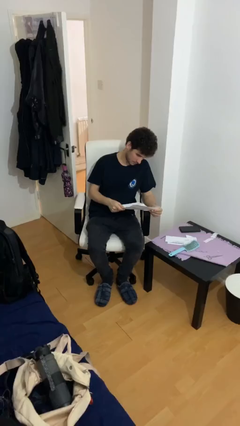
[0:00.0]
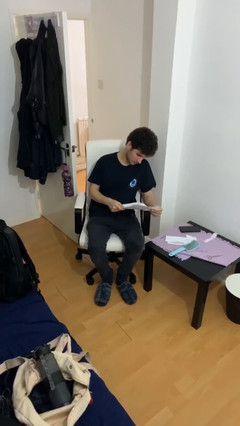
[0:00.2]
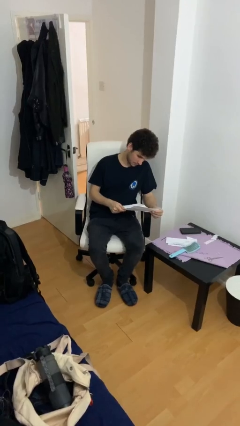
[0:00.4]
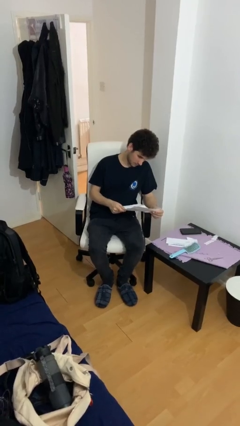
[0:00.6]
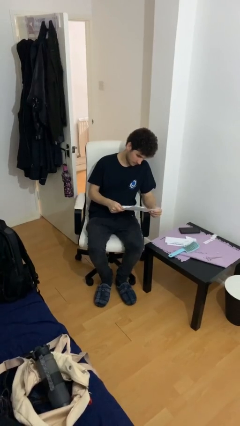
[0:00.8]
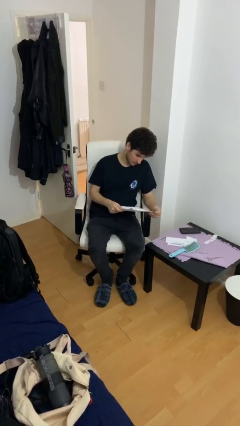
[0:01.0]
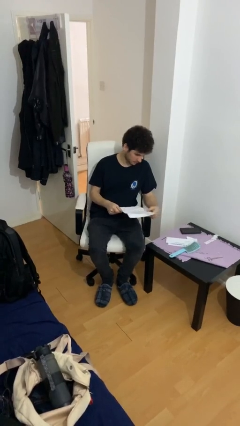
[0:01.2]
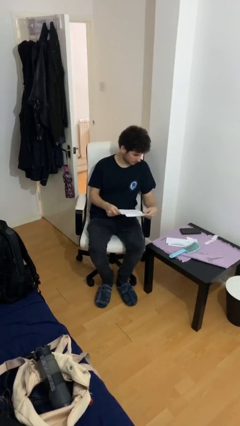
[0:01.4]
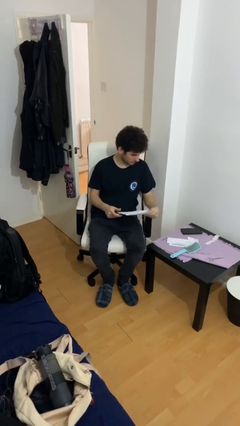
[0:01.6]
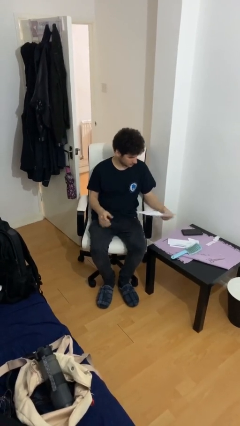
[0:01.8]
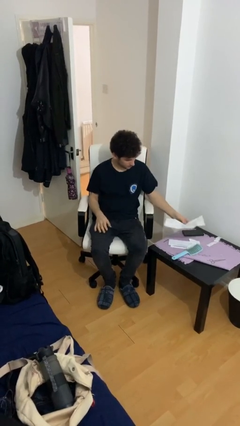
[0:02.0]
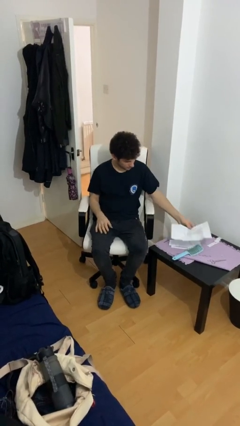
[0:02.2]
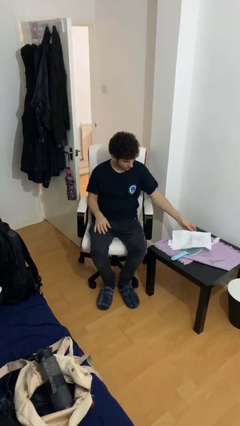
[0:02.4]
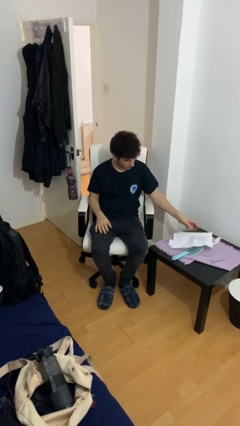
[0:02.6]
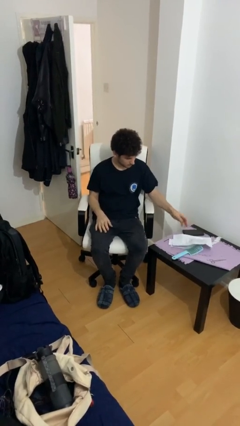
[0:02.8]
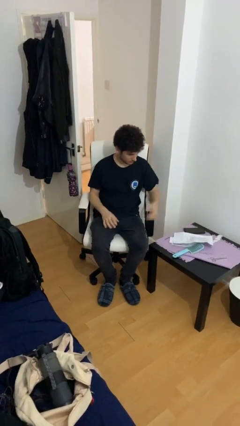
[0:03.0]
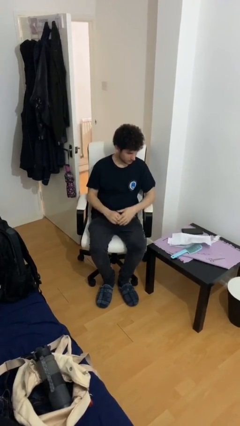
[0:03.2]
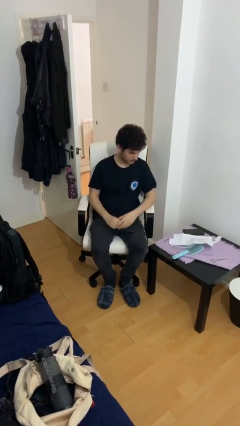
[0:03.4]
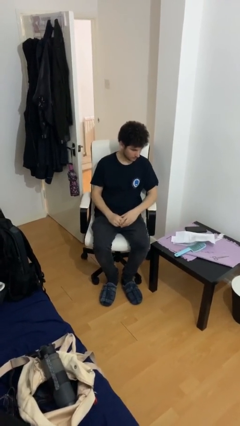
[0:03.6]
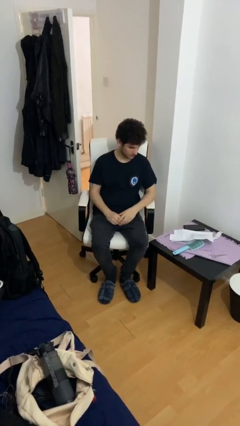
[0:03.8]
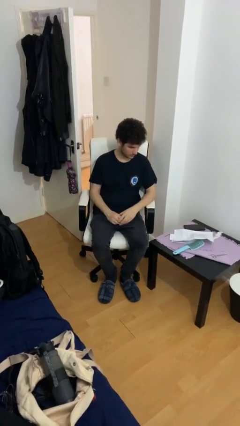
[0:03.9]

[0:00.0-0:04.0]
person puts down object on table

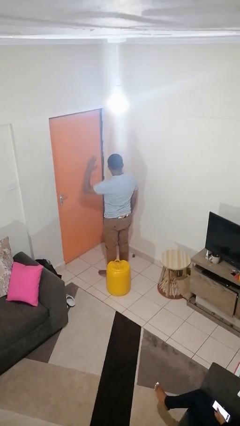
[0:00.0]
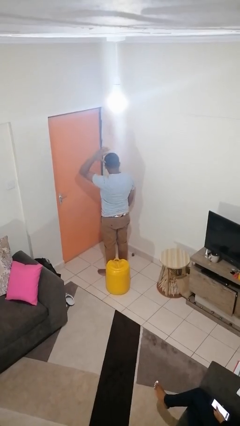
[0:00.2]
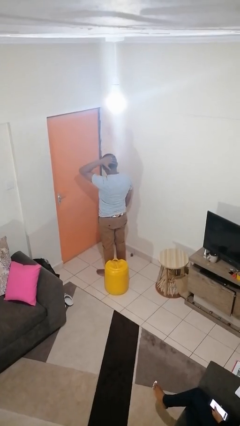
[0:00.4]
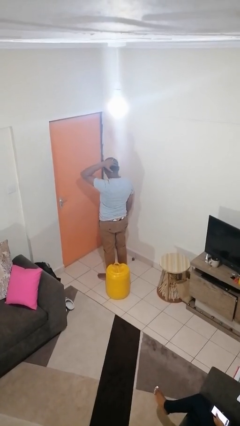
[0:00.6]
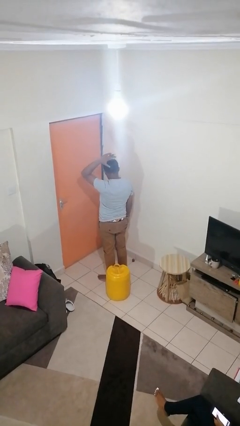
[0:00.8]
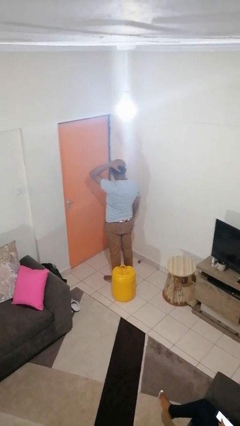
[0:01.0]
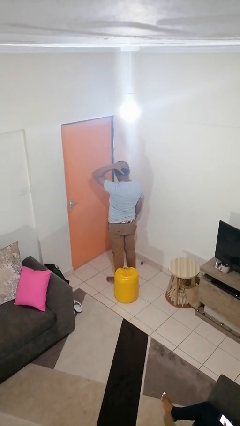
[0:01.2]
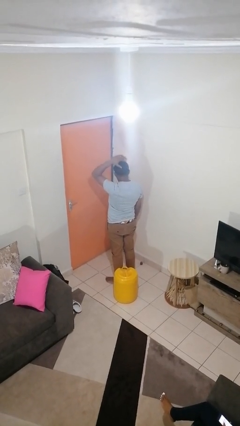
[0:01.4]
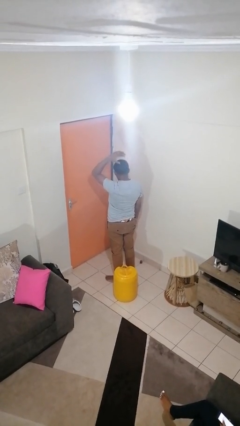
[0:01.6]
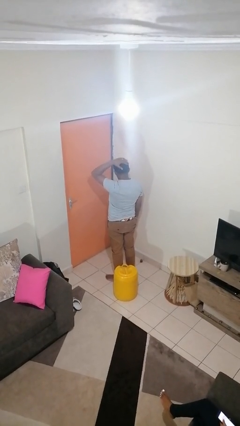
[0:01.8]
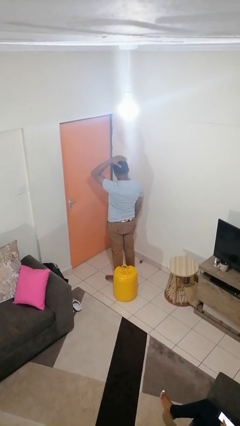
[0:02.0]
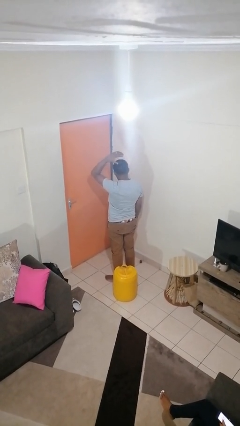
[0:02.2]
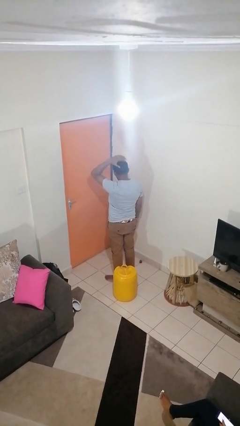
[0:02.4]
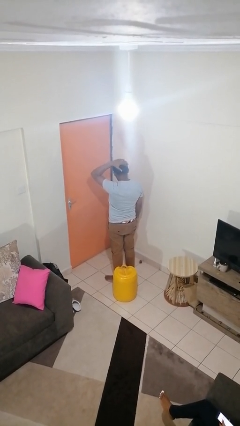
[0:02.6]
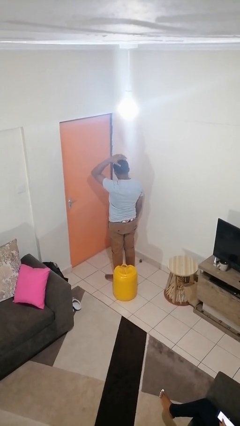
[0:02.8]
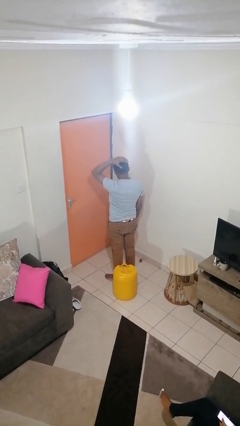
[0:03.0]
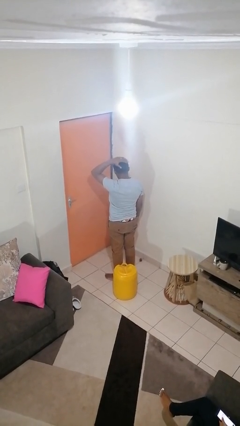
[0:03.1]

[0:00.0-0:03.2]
person pats head

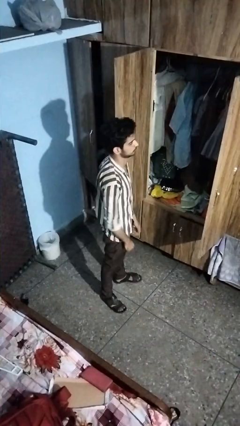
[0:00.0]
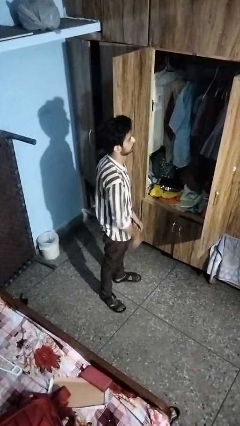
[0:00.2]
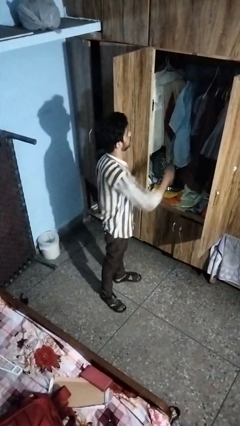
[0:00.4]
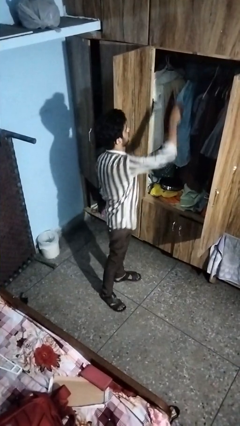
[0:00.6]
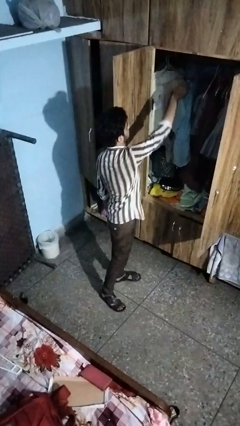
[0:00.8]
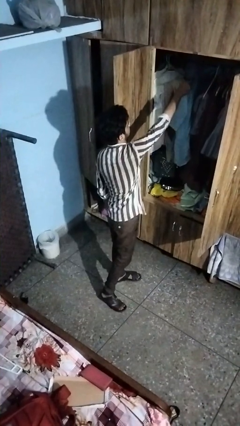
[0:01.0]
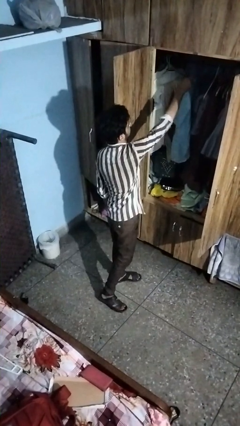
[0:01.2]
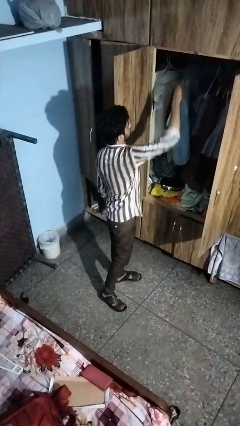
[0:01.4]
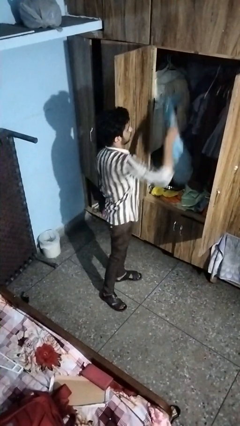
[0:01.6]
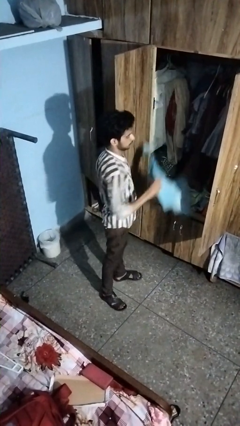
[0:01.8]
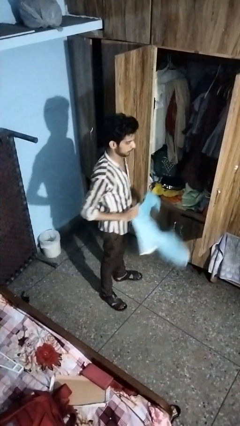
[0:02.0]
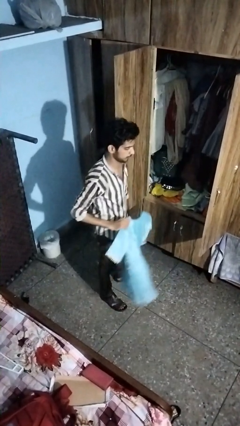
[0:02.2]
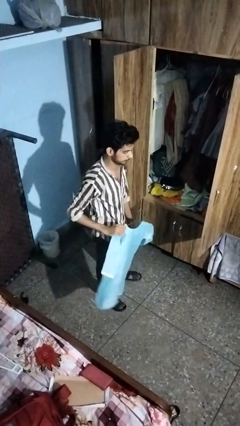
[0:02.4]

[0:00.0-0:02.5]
person takes clothes from closet

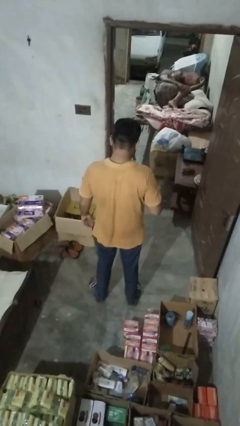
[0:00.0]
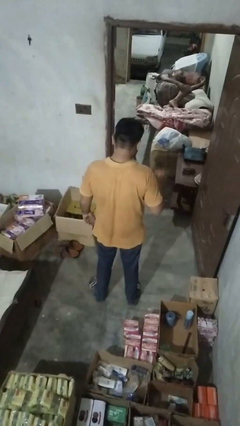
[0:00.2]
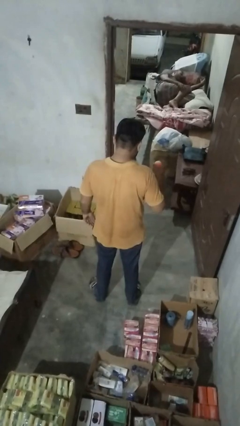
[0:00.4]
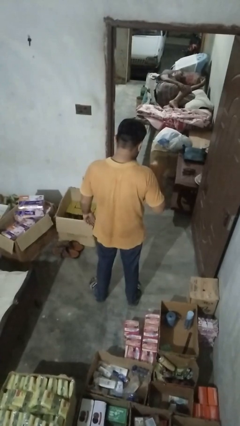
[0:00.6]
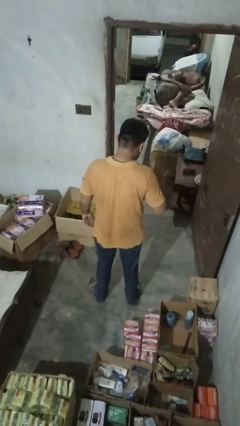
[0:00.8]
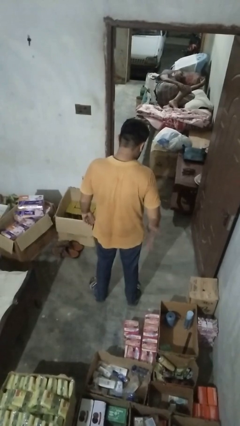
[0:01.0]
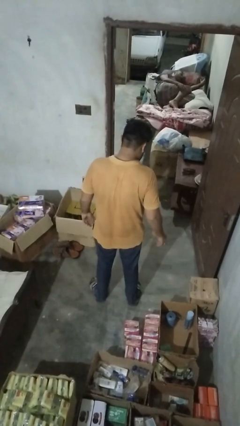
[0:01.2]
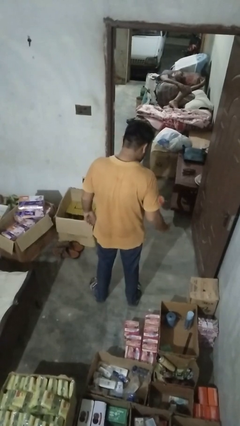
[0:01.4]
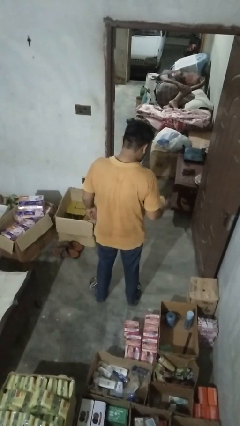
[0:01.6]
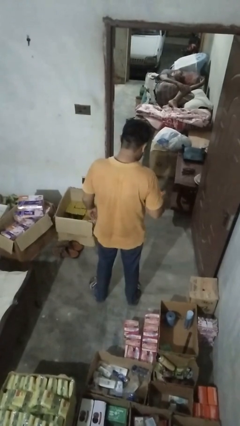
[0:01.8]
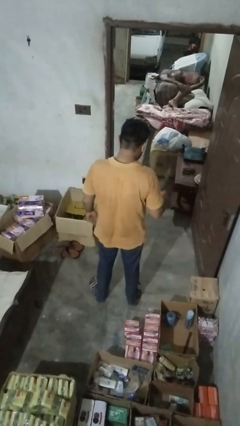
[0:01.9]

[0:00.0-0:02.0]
person bounces ball on floor

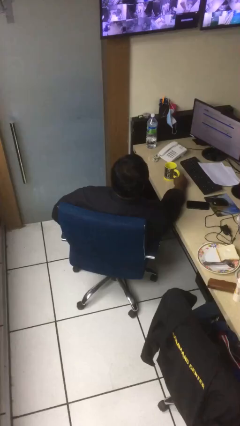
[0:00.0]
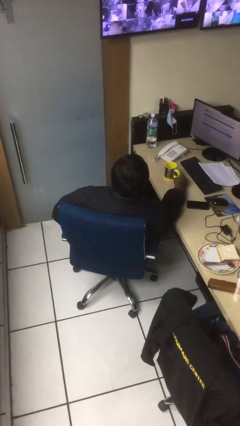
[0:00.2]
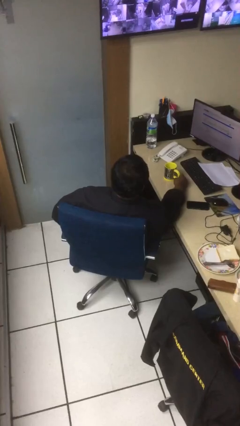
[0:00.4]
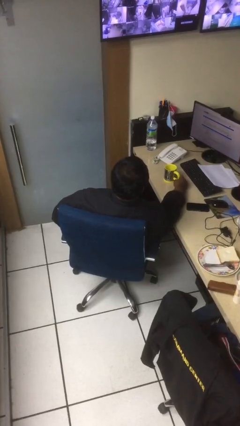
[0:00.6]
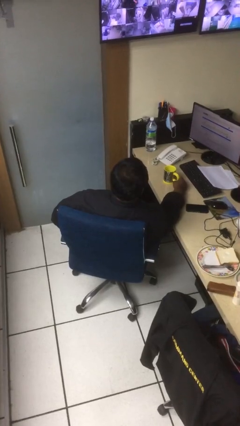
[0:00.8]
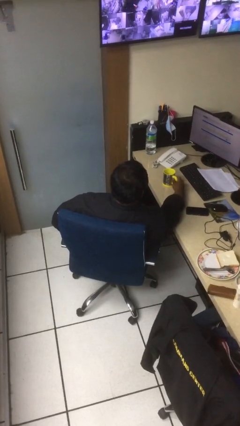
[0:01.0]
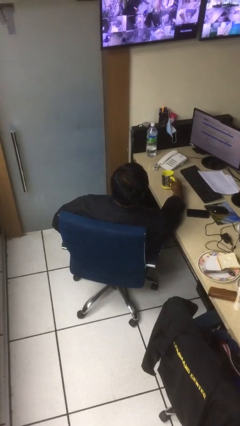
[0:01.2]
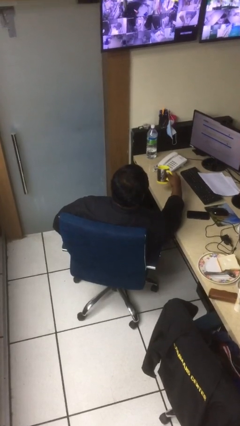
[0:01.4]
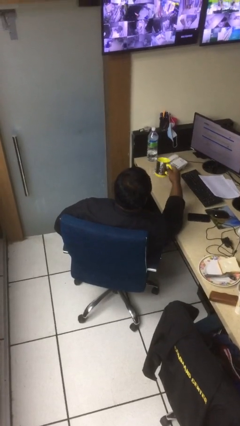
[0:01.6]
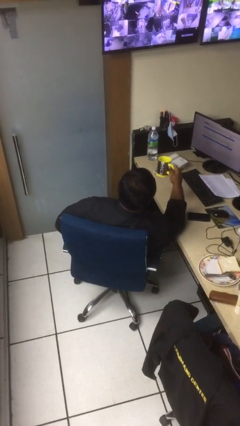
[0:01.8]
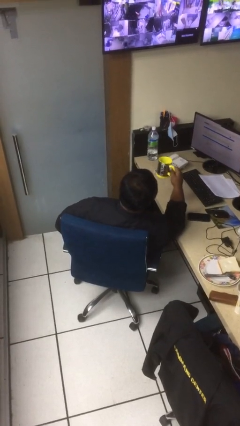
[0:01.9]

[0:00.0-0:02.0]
person picks up object from table

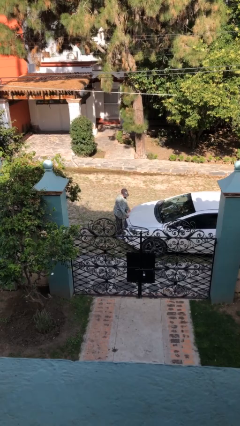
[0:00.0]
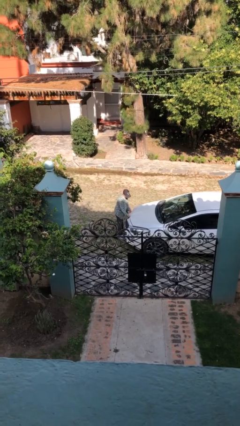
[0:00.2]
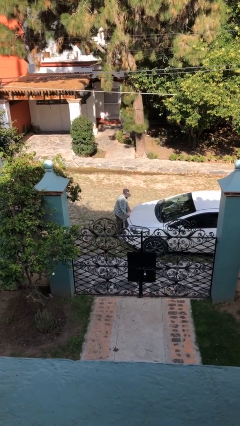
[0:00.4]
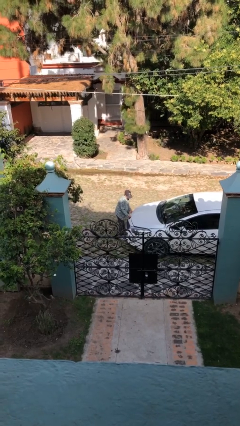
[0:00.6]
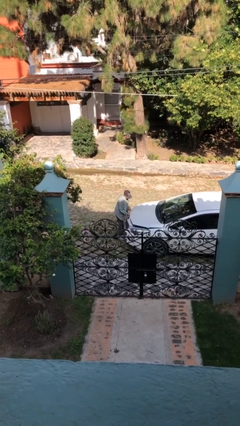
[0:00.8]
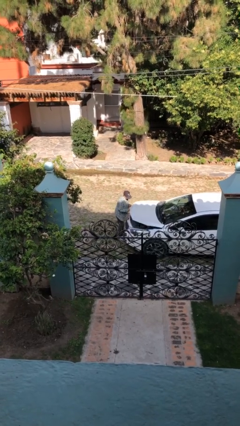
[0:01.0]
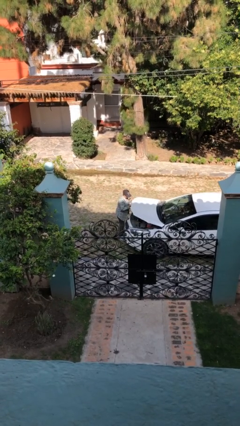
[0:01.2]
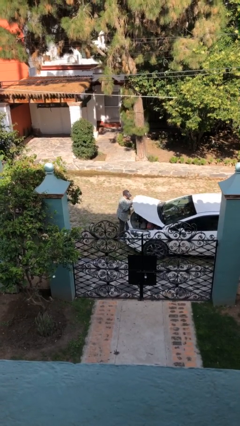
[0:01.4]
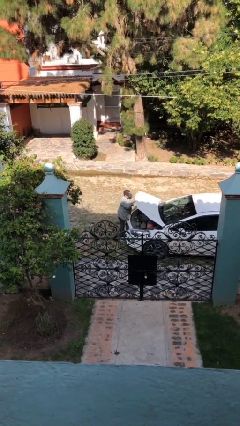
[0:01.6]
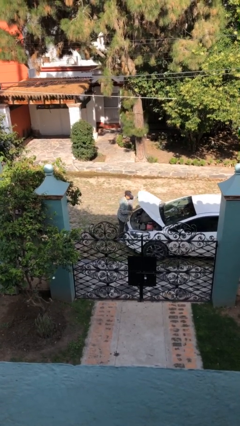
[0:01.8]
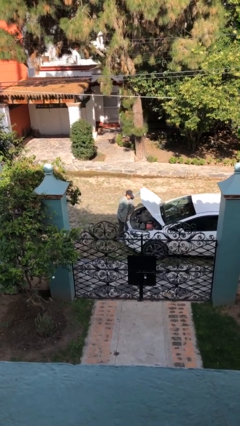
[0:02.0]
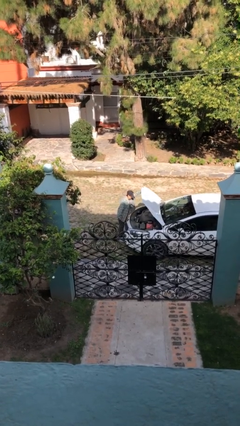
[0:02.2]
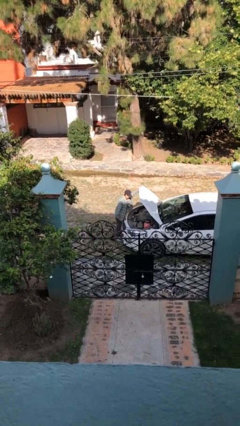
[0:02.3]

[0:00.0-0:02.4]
person opens car hood

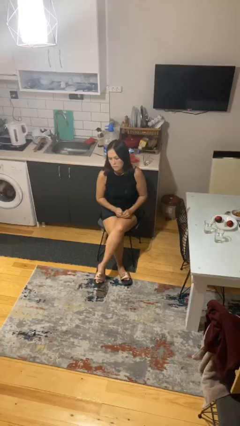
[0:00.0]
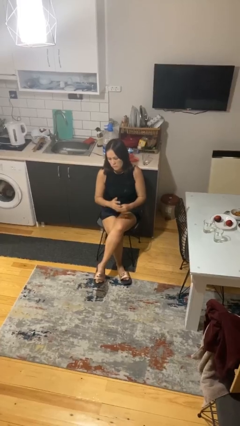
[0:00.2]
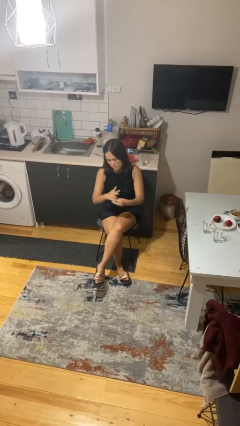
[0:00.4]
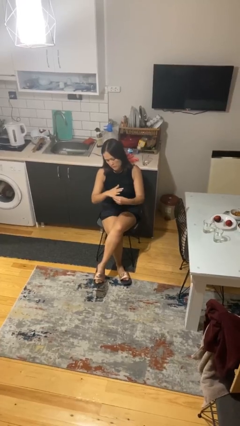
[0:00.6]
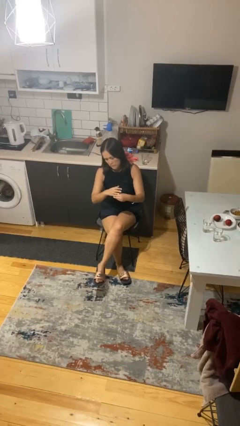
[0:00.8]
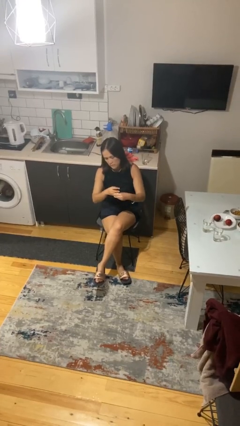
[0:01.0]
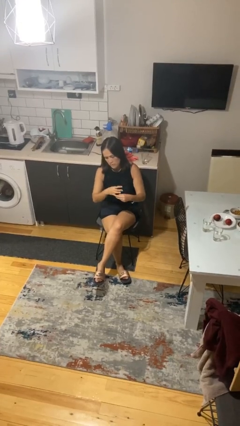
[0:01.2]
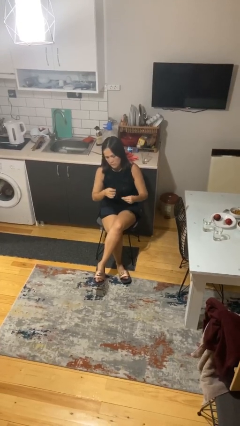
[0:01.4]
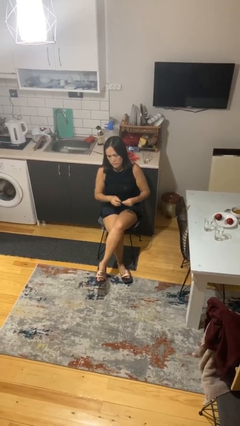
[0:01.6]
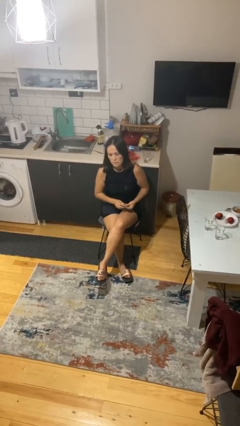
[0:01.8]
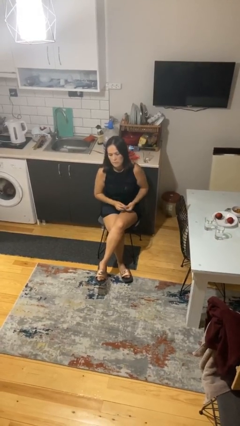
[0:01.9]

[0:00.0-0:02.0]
person takes off ring
